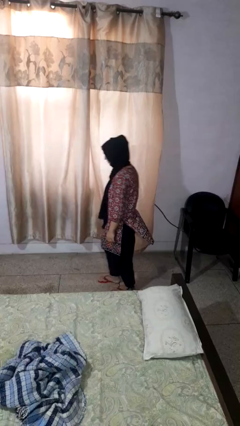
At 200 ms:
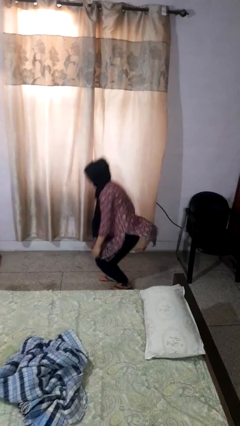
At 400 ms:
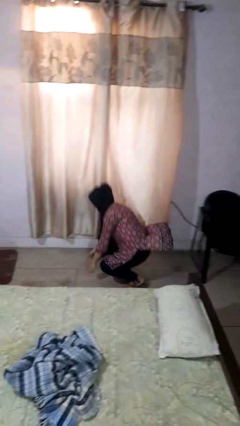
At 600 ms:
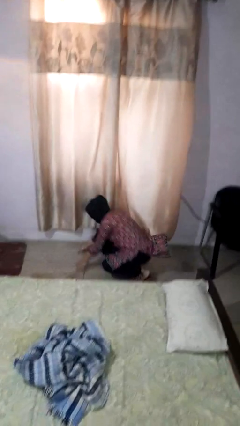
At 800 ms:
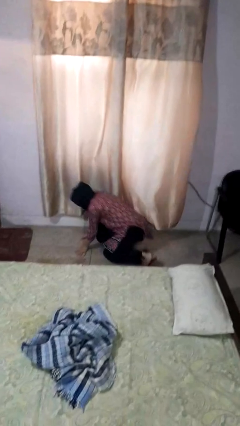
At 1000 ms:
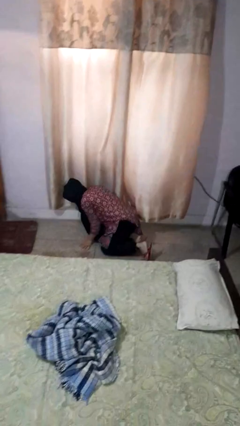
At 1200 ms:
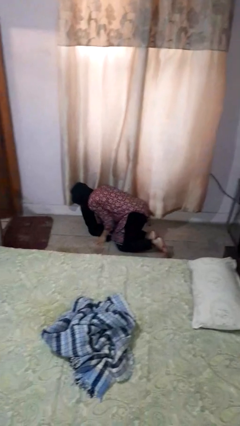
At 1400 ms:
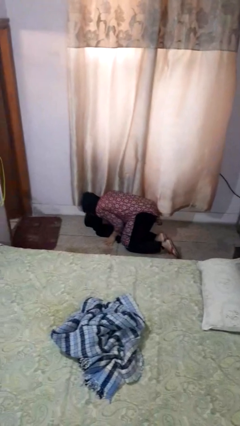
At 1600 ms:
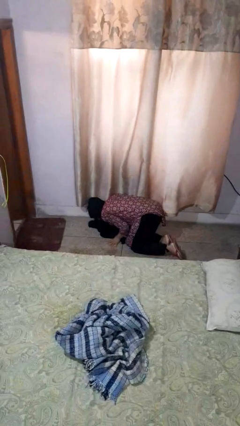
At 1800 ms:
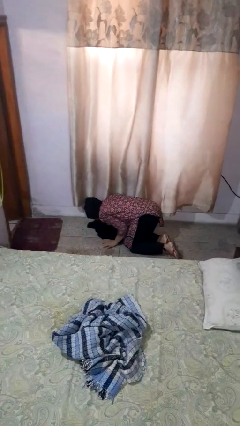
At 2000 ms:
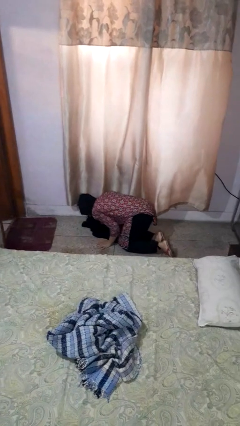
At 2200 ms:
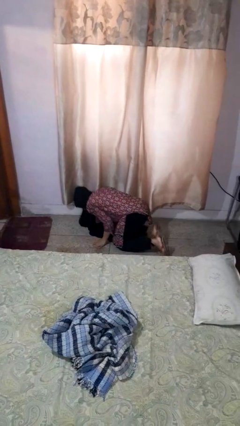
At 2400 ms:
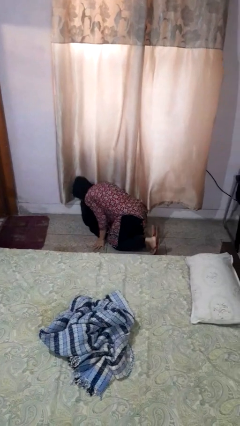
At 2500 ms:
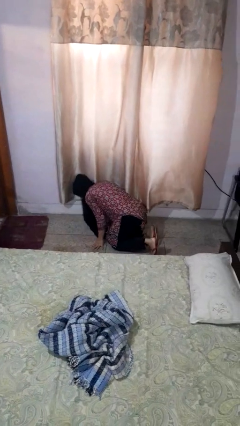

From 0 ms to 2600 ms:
person falls while standing

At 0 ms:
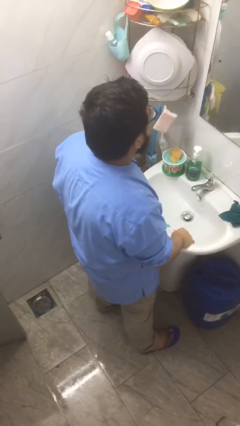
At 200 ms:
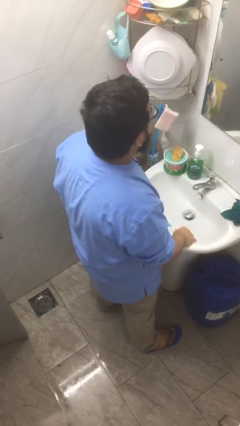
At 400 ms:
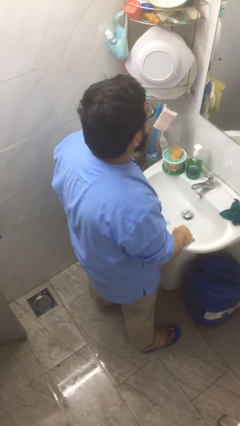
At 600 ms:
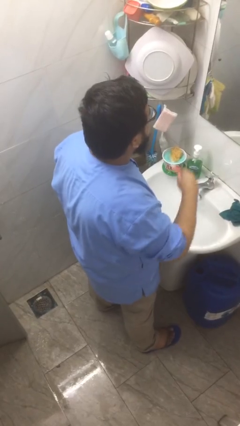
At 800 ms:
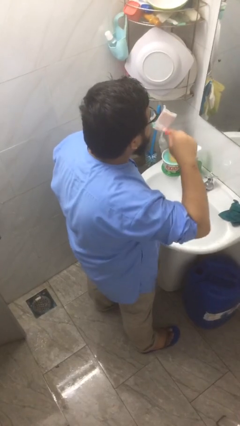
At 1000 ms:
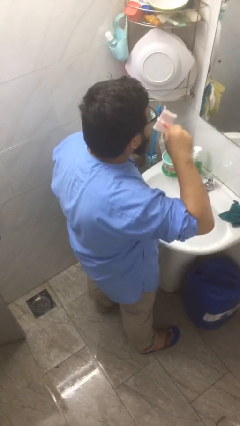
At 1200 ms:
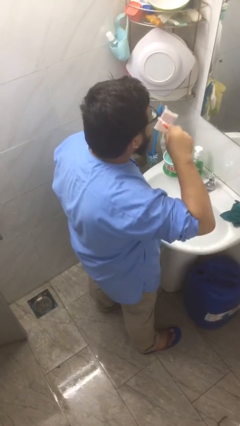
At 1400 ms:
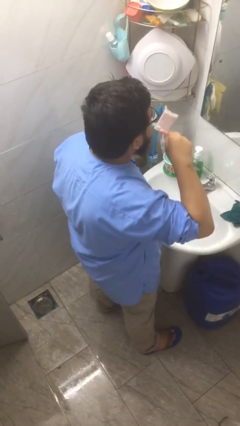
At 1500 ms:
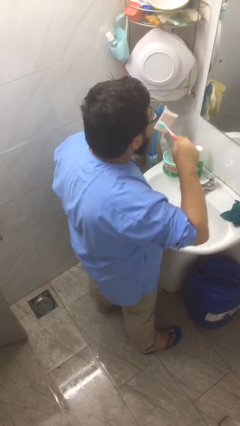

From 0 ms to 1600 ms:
person brushes teeth

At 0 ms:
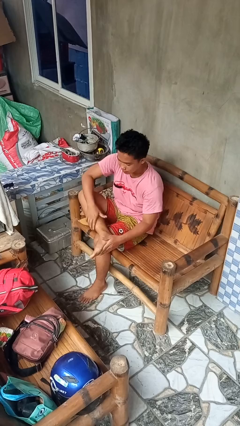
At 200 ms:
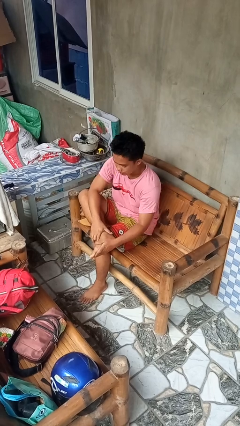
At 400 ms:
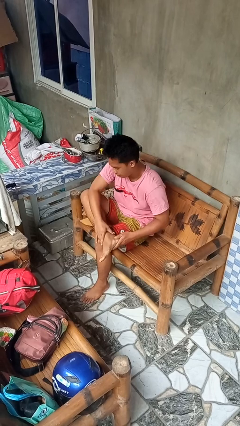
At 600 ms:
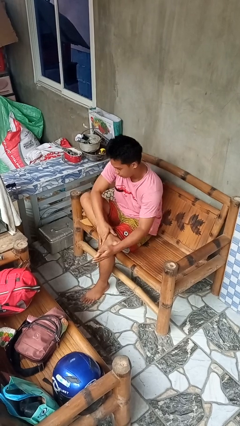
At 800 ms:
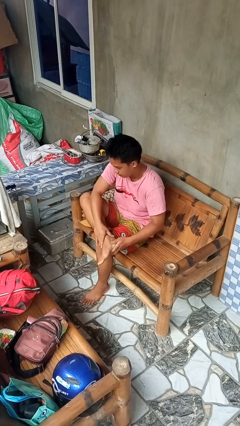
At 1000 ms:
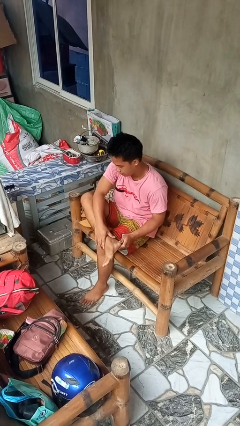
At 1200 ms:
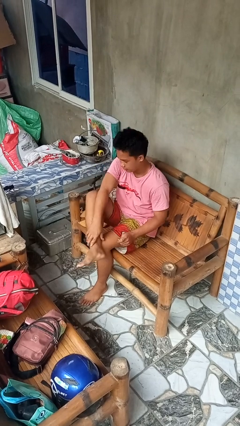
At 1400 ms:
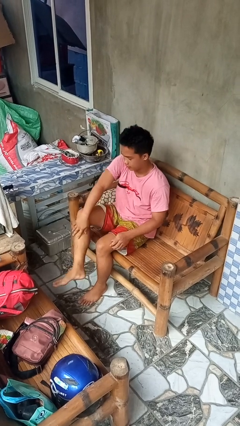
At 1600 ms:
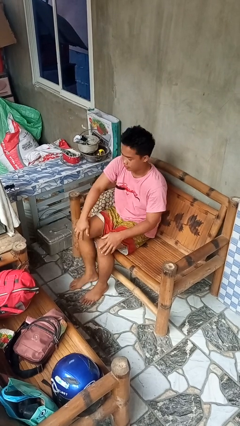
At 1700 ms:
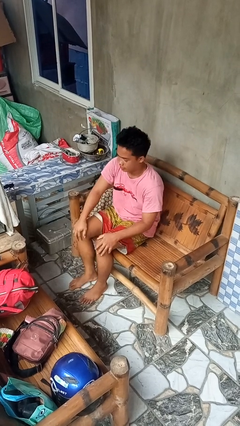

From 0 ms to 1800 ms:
person rubs foot

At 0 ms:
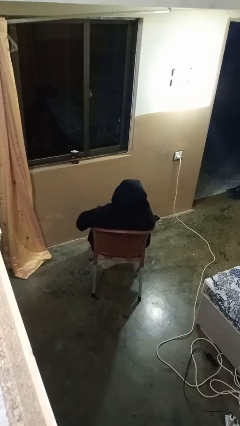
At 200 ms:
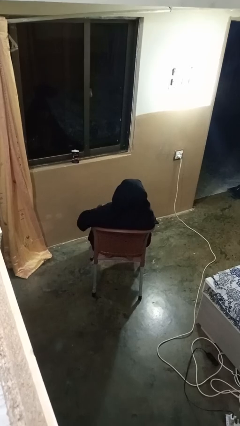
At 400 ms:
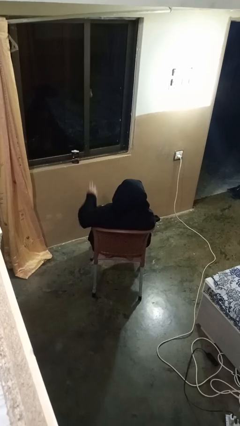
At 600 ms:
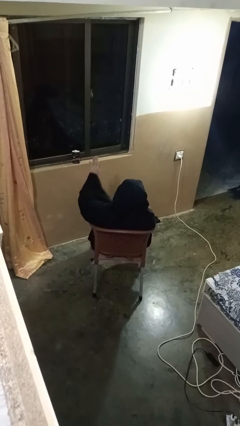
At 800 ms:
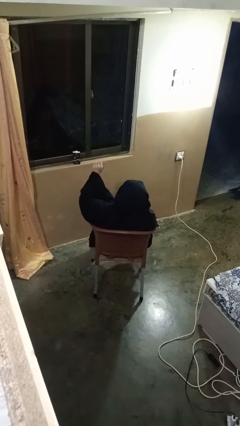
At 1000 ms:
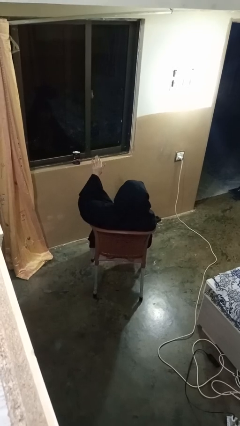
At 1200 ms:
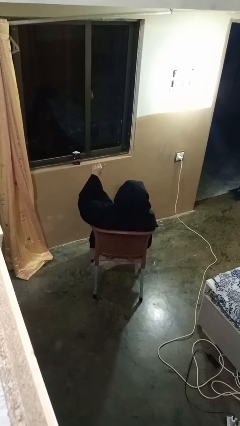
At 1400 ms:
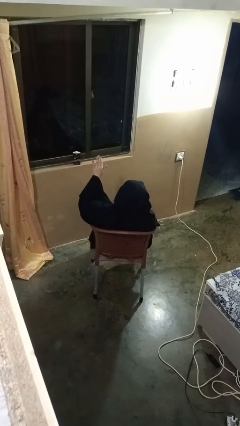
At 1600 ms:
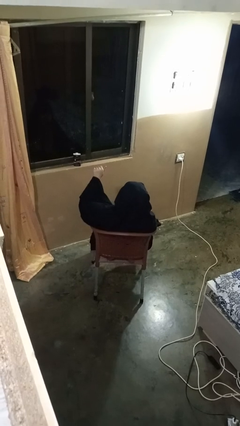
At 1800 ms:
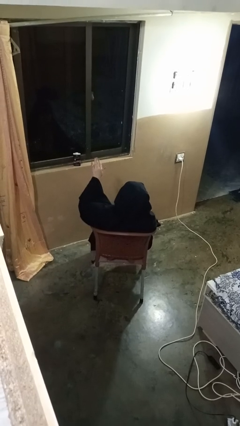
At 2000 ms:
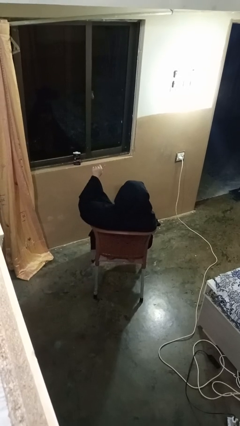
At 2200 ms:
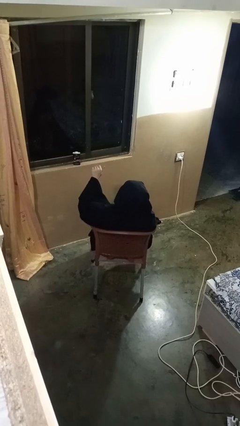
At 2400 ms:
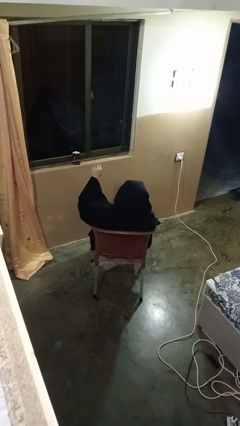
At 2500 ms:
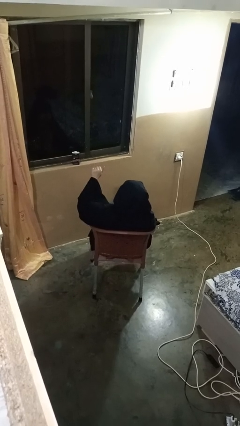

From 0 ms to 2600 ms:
person gestures come here

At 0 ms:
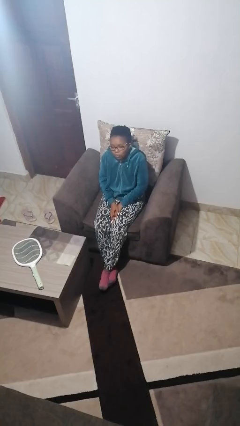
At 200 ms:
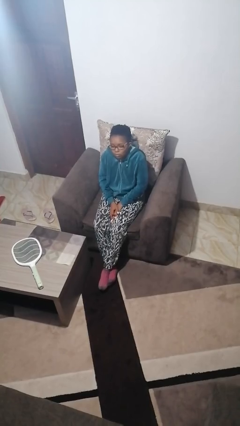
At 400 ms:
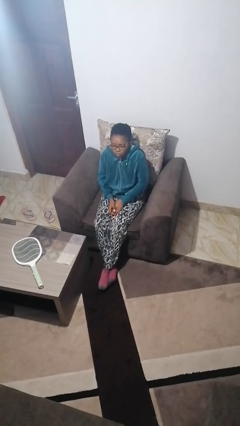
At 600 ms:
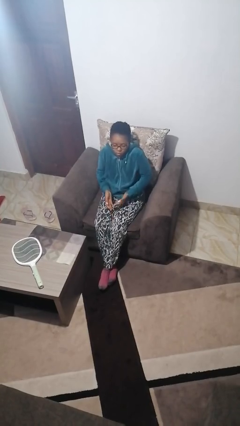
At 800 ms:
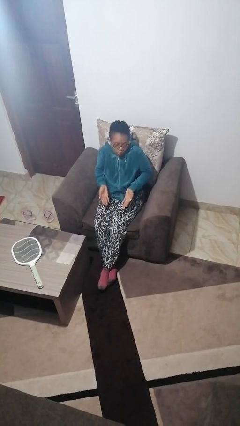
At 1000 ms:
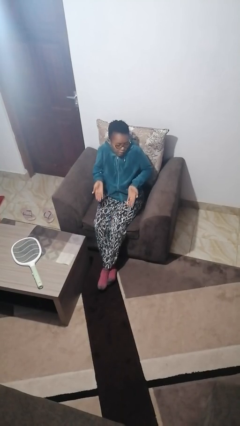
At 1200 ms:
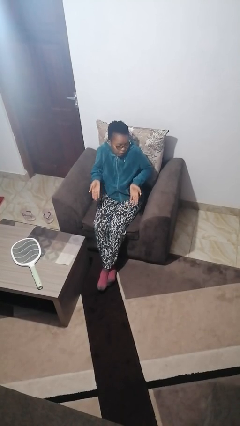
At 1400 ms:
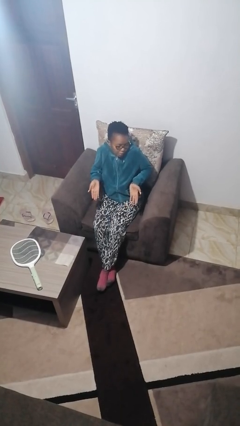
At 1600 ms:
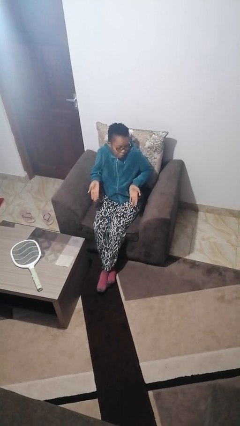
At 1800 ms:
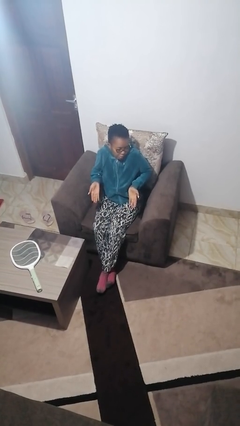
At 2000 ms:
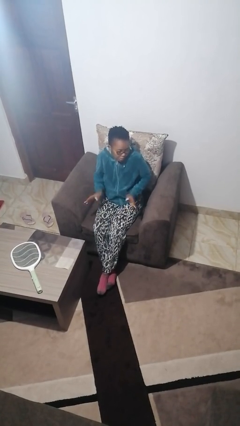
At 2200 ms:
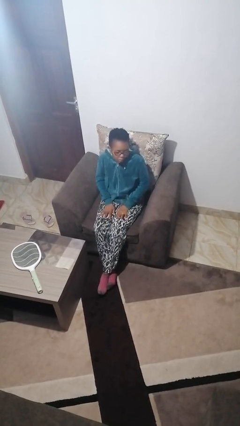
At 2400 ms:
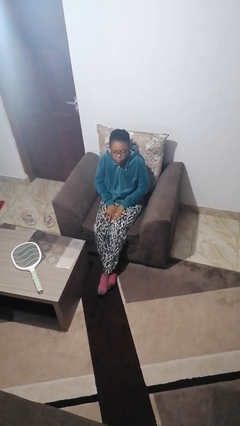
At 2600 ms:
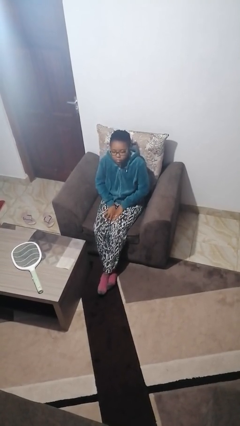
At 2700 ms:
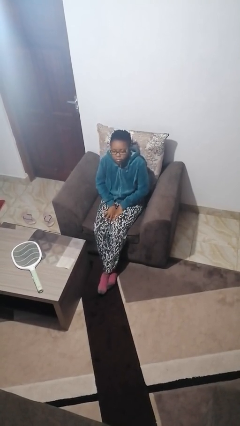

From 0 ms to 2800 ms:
person shrugs

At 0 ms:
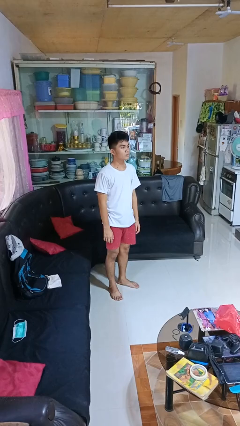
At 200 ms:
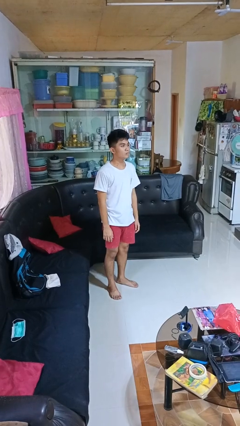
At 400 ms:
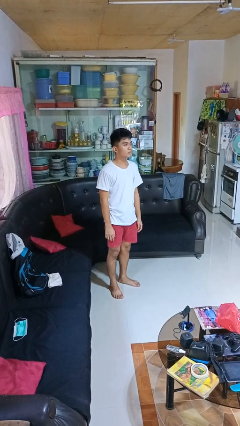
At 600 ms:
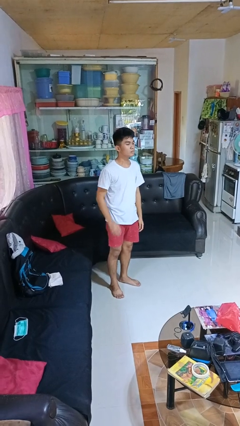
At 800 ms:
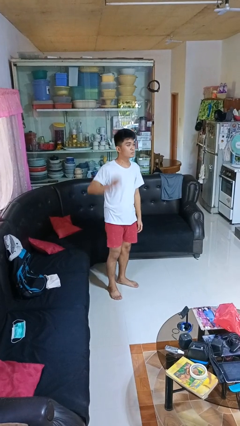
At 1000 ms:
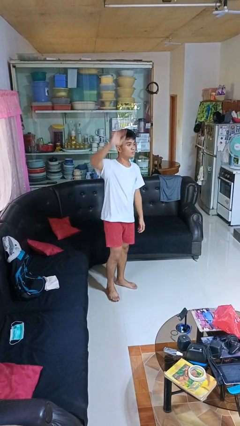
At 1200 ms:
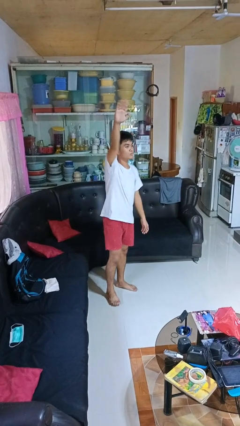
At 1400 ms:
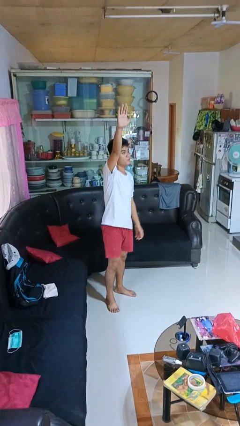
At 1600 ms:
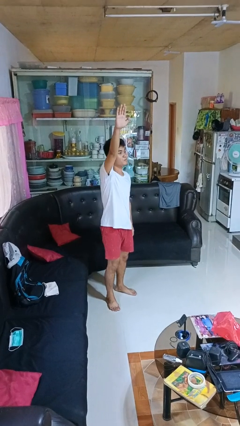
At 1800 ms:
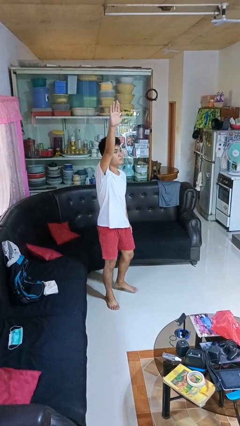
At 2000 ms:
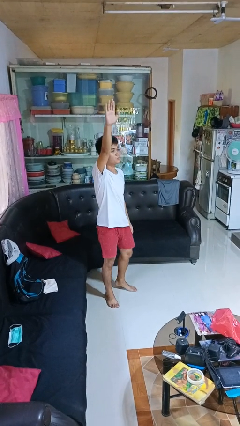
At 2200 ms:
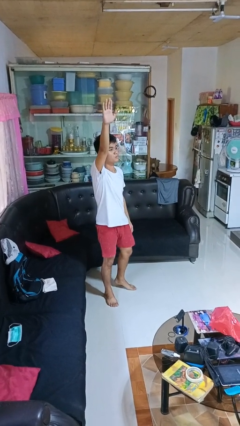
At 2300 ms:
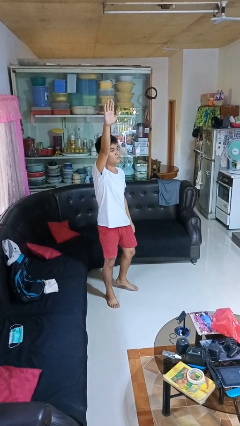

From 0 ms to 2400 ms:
person gestures raise hand

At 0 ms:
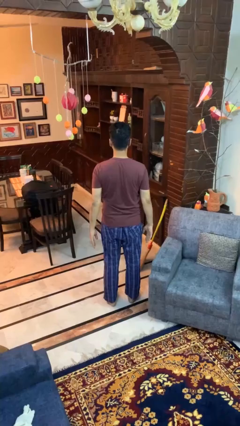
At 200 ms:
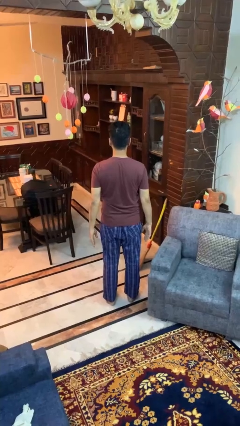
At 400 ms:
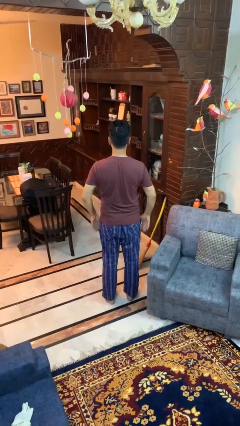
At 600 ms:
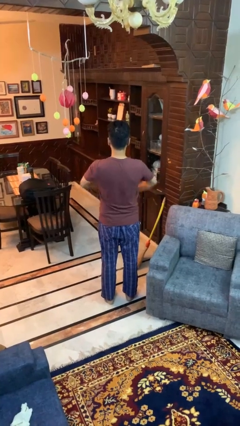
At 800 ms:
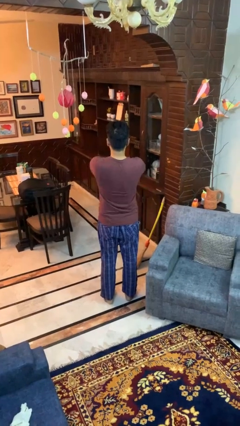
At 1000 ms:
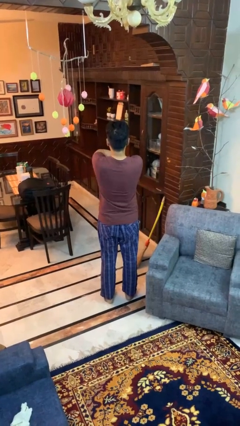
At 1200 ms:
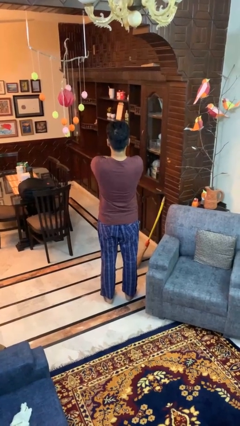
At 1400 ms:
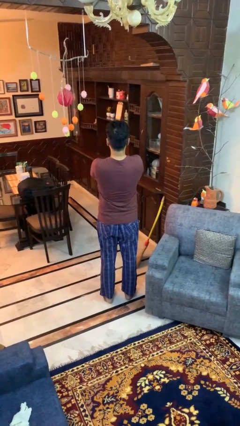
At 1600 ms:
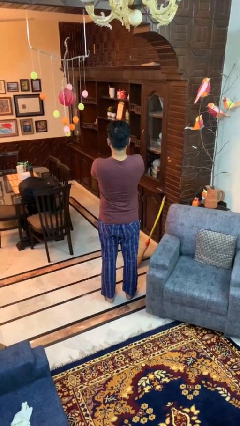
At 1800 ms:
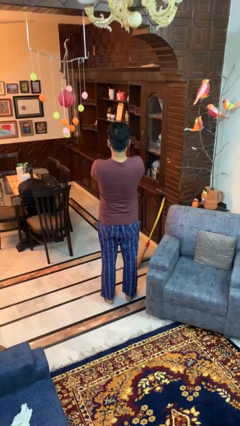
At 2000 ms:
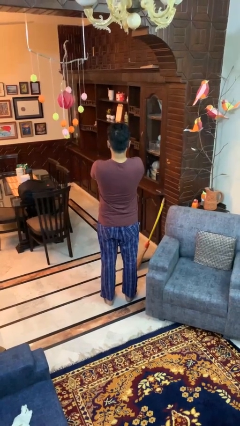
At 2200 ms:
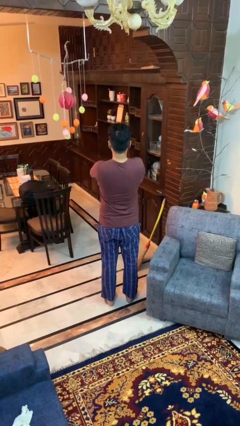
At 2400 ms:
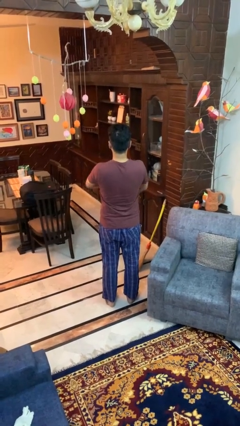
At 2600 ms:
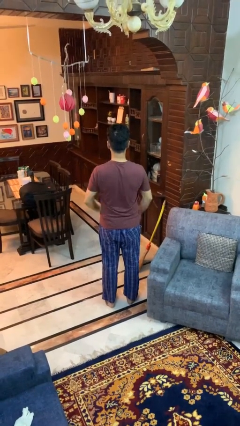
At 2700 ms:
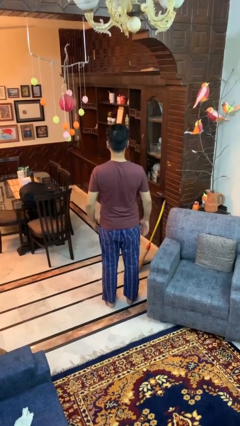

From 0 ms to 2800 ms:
person crosses arms

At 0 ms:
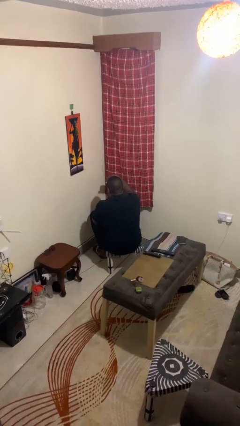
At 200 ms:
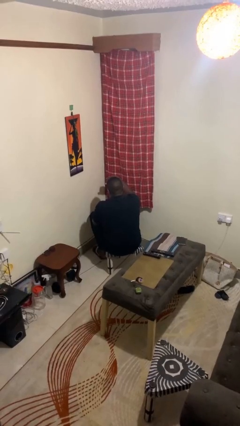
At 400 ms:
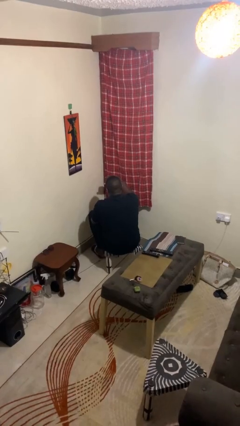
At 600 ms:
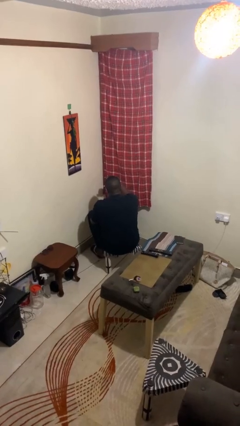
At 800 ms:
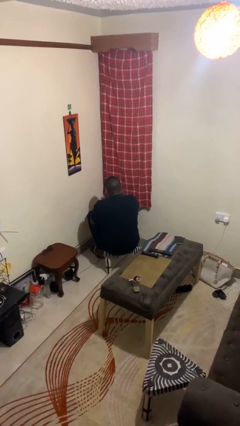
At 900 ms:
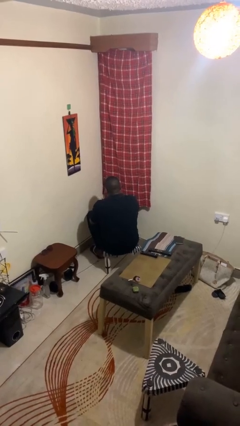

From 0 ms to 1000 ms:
person gestures swipe down
